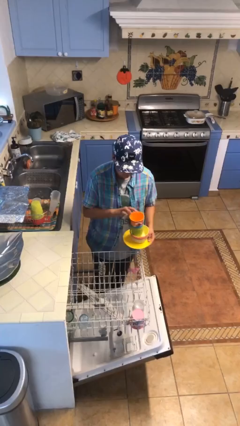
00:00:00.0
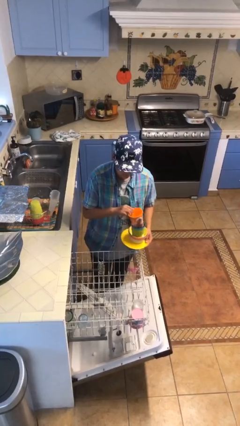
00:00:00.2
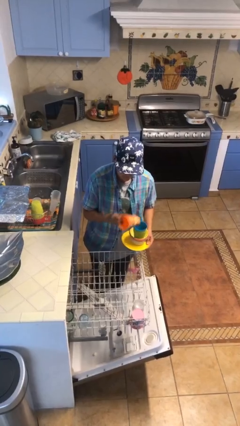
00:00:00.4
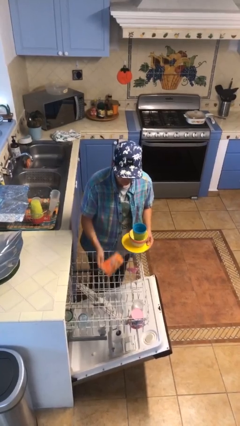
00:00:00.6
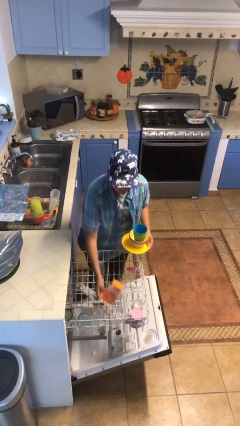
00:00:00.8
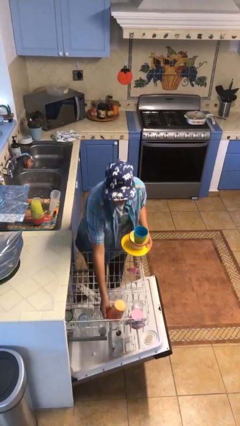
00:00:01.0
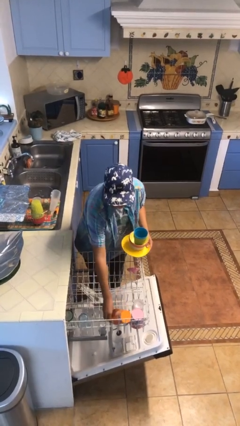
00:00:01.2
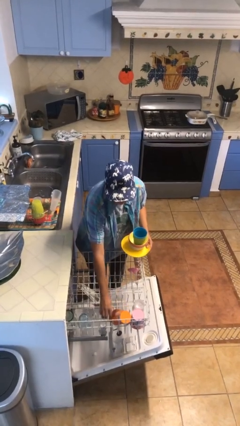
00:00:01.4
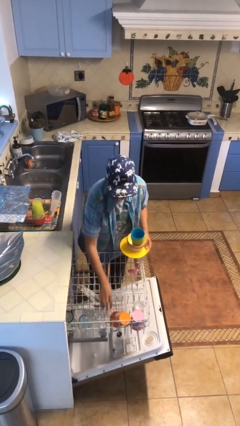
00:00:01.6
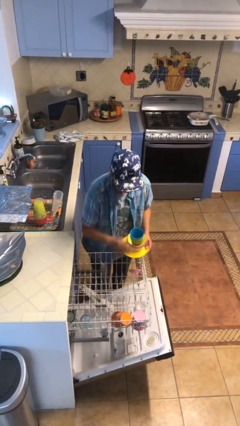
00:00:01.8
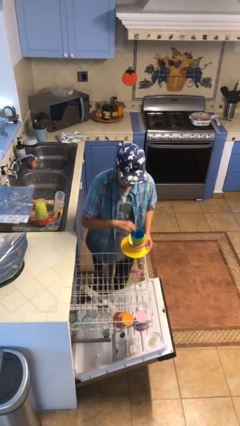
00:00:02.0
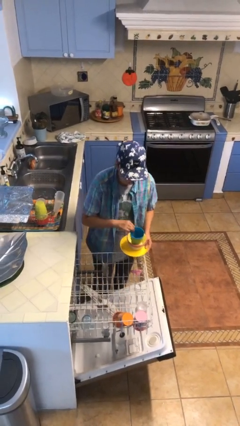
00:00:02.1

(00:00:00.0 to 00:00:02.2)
person loads dishwasher

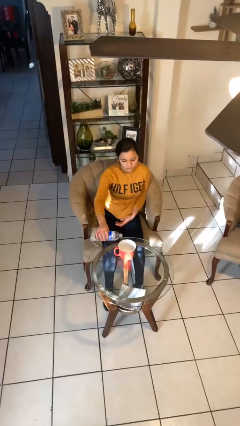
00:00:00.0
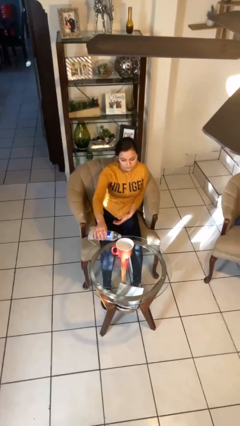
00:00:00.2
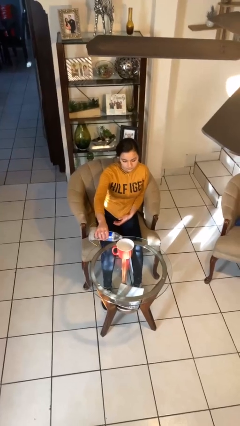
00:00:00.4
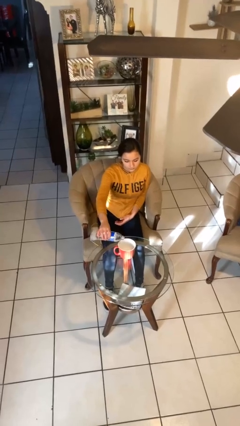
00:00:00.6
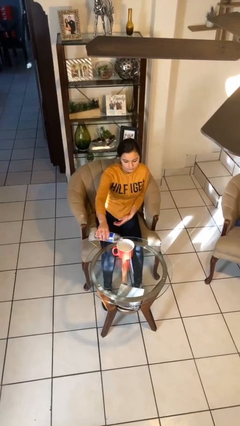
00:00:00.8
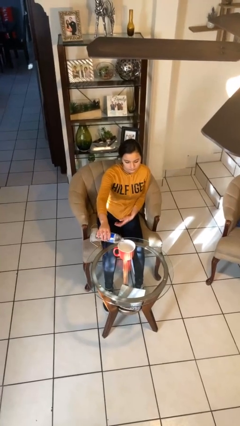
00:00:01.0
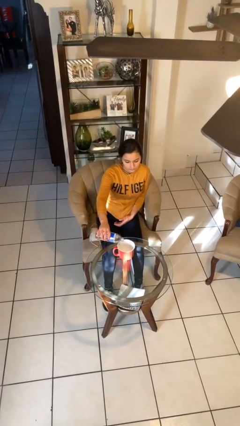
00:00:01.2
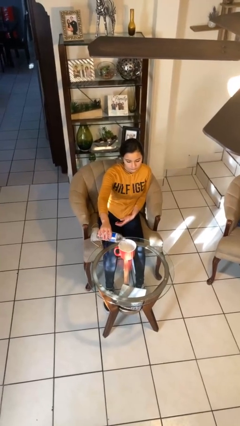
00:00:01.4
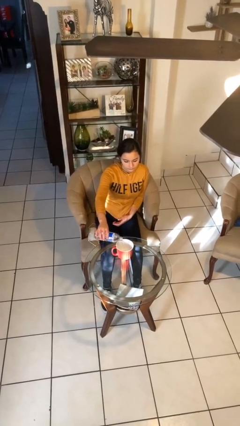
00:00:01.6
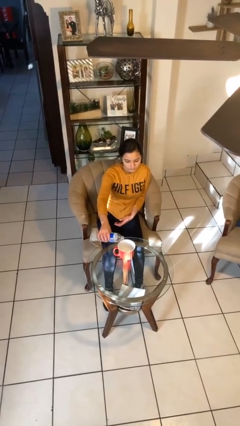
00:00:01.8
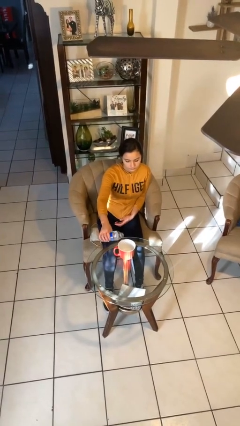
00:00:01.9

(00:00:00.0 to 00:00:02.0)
person pours liquid into cup

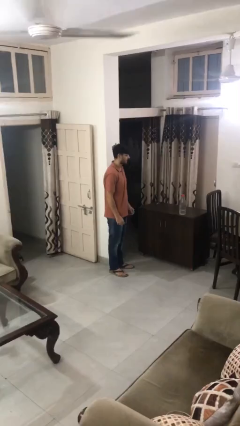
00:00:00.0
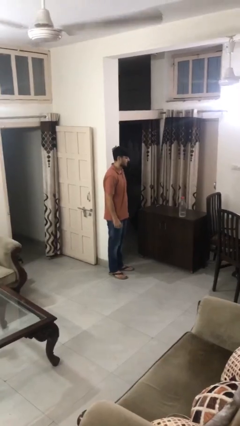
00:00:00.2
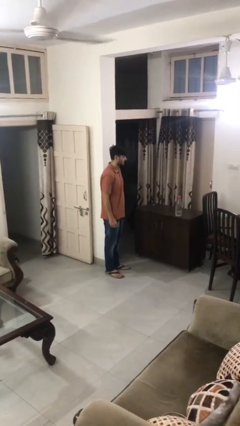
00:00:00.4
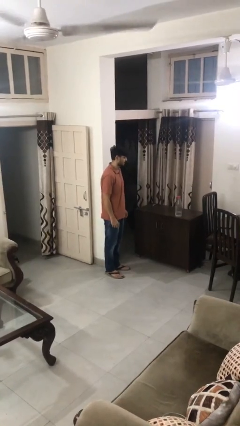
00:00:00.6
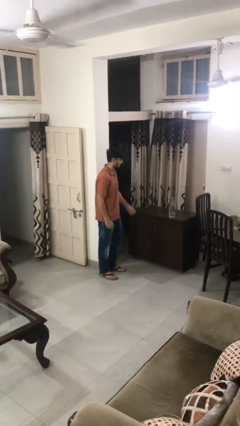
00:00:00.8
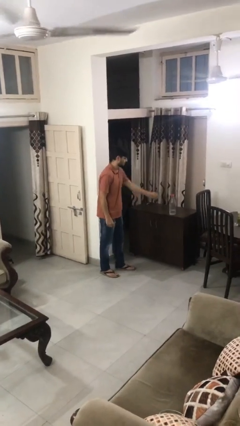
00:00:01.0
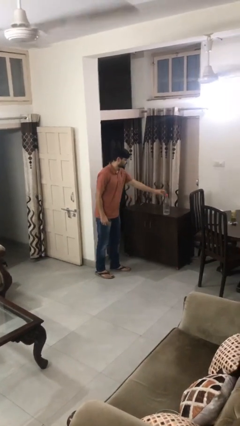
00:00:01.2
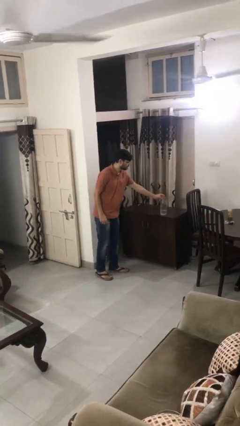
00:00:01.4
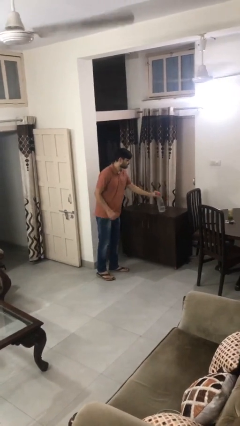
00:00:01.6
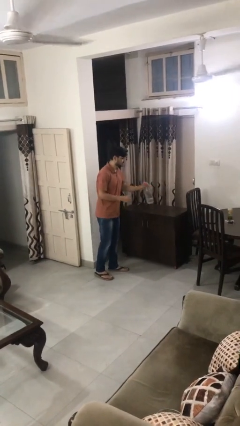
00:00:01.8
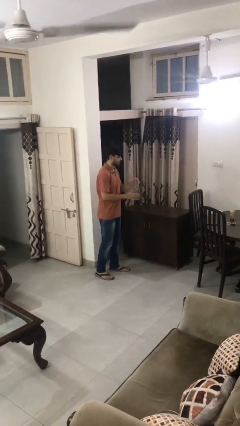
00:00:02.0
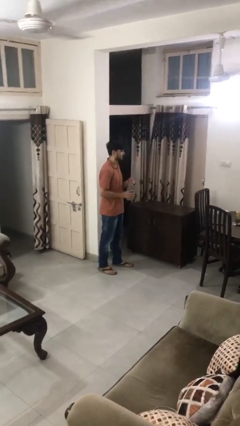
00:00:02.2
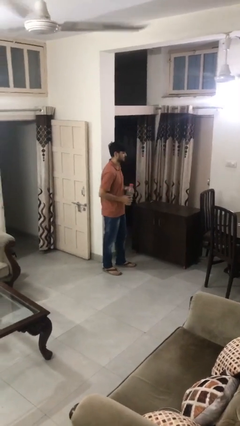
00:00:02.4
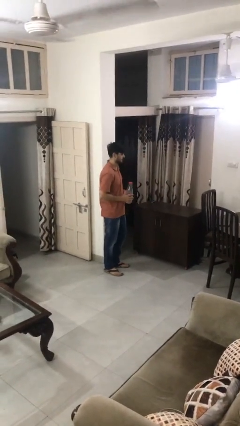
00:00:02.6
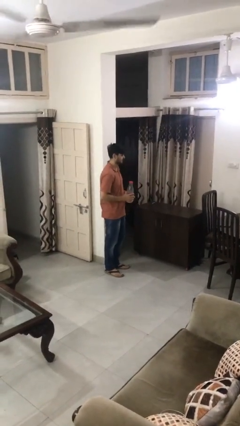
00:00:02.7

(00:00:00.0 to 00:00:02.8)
person picks up object from countertop

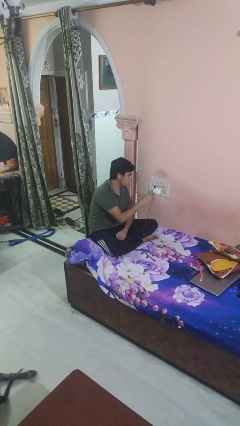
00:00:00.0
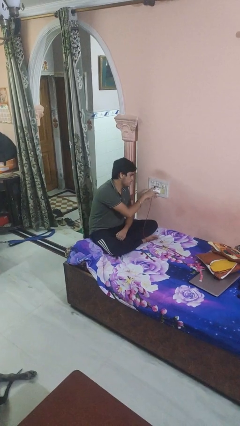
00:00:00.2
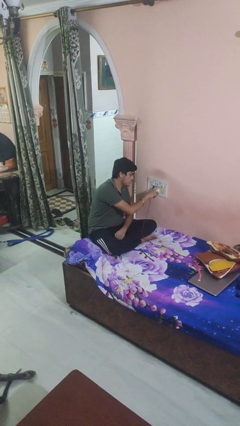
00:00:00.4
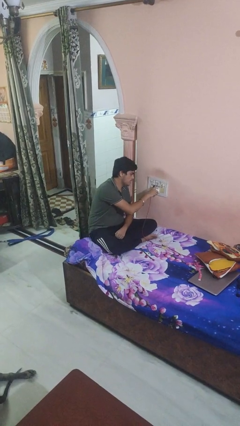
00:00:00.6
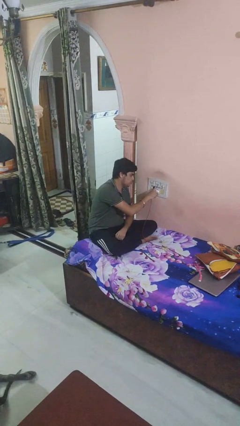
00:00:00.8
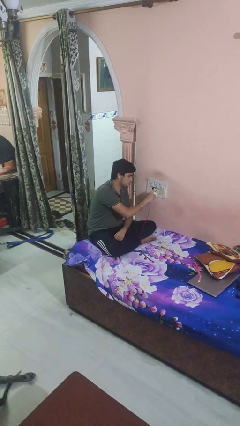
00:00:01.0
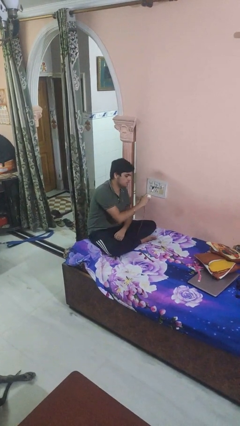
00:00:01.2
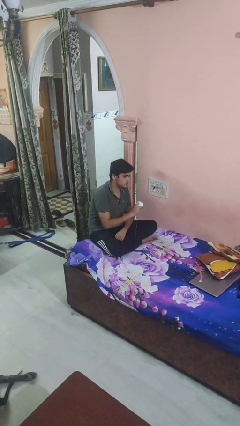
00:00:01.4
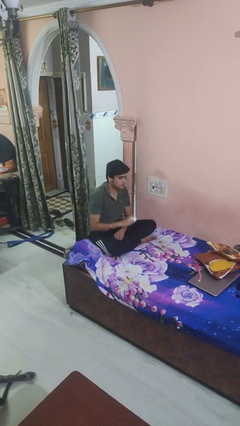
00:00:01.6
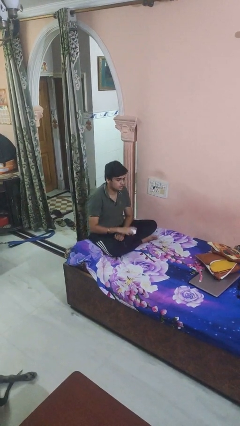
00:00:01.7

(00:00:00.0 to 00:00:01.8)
person unplugs from electrical socket

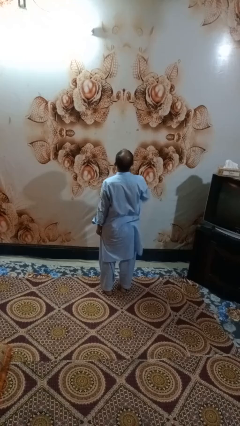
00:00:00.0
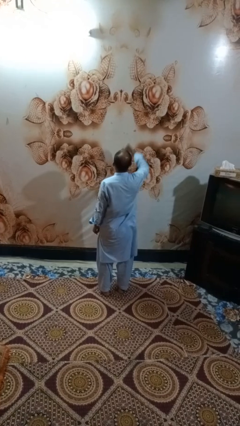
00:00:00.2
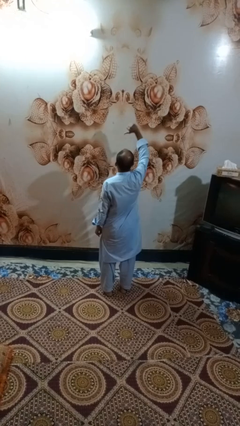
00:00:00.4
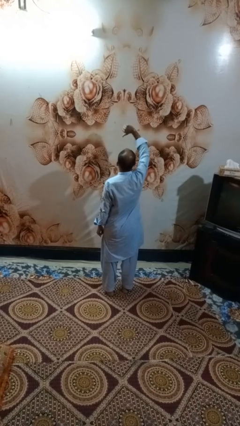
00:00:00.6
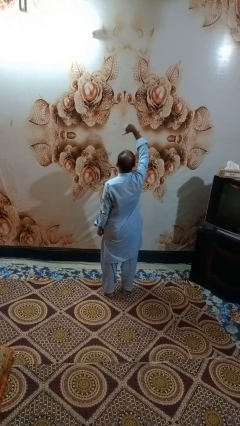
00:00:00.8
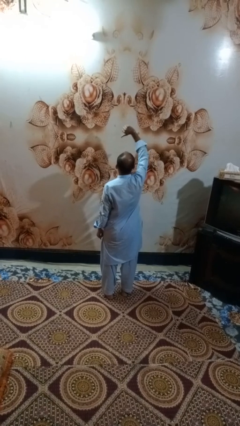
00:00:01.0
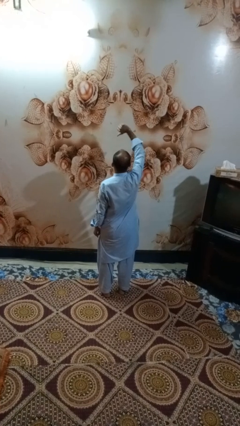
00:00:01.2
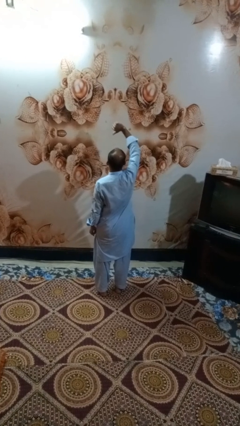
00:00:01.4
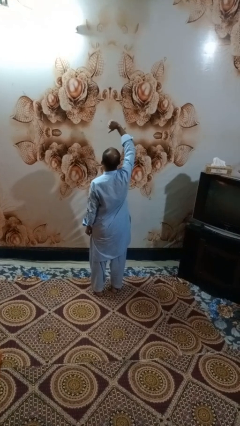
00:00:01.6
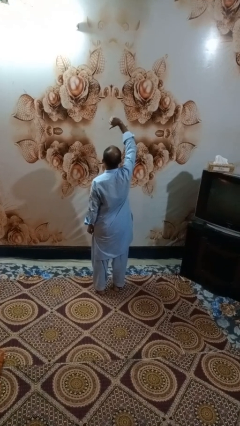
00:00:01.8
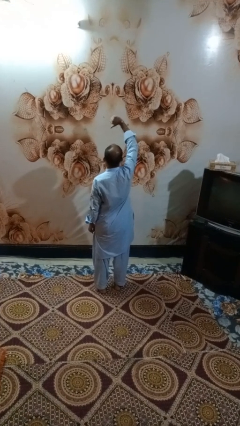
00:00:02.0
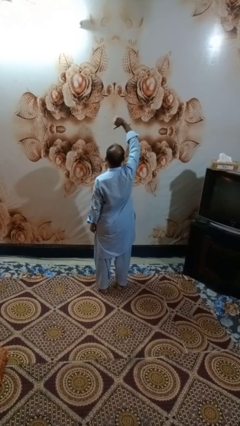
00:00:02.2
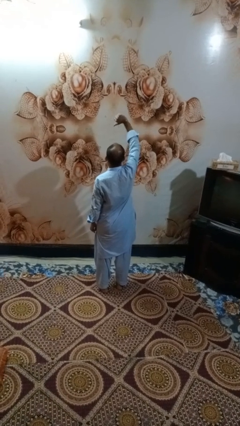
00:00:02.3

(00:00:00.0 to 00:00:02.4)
person gestures thumbs down

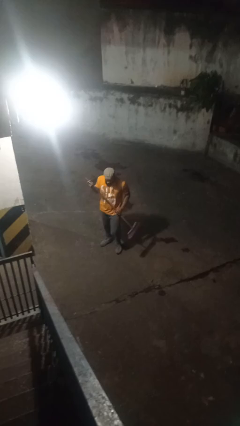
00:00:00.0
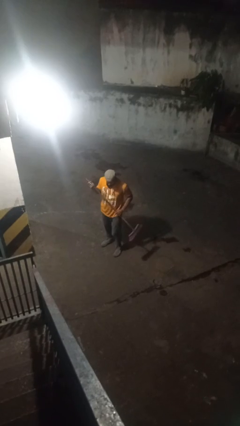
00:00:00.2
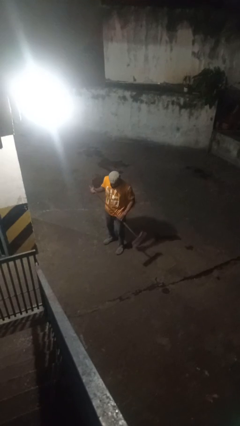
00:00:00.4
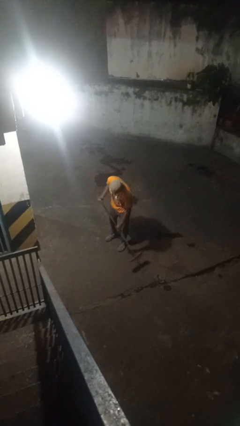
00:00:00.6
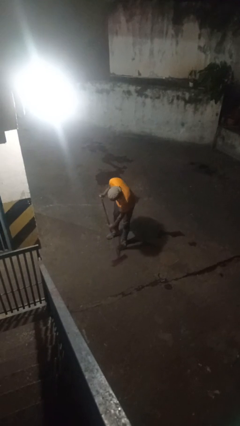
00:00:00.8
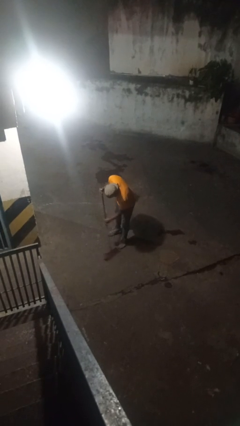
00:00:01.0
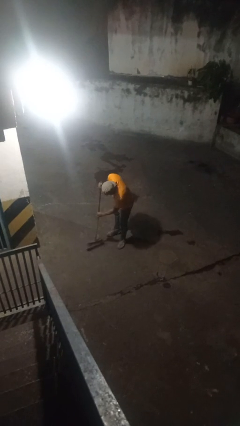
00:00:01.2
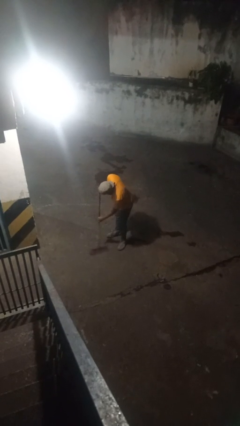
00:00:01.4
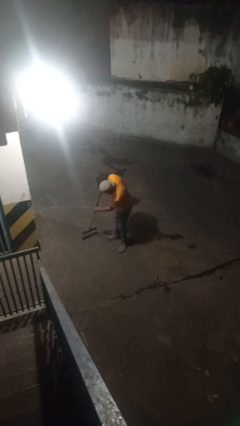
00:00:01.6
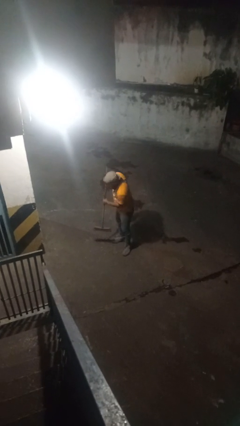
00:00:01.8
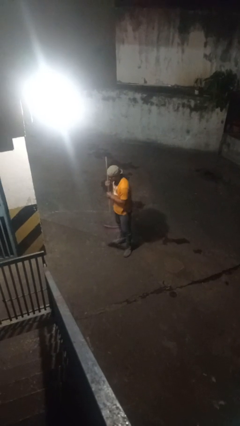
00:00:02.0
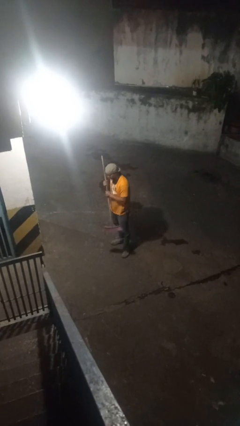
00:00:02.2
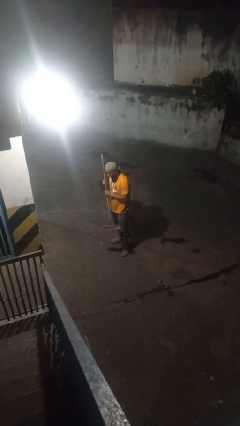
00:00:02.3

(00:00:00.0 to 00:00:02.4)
person sweeps floor

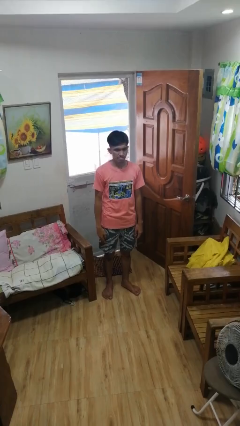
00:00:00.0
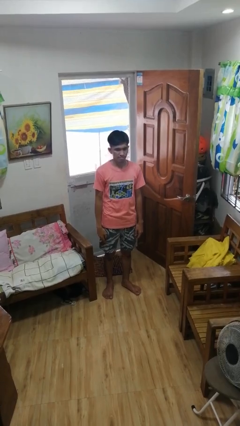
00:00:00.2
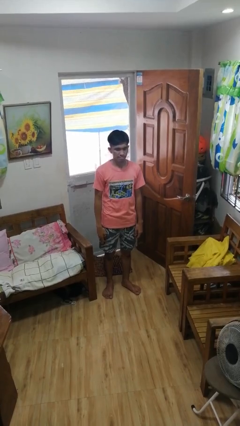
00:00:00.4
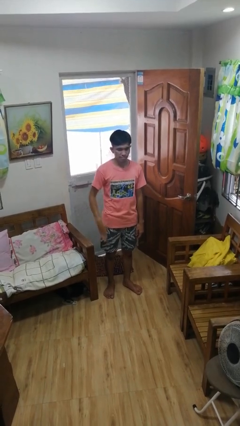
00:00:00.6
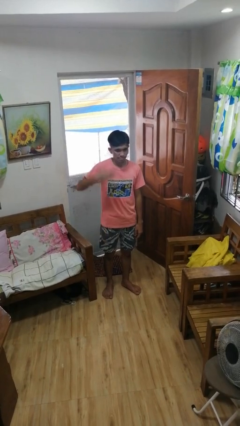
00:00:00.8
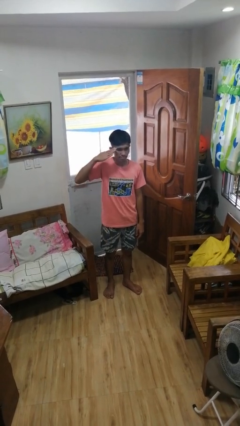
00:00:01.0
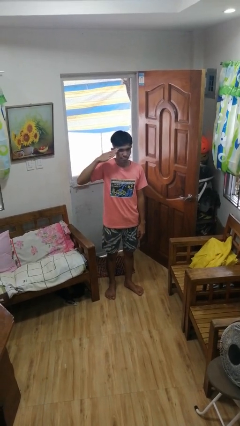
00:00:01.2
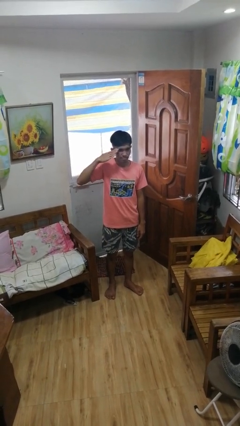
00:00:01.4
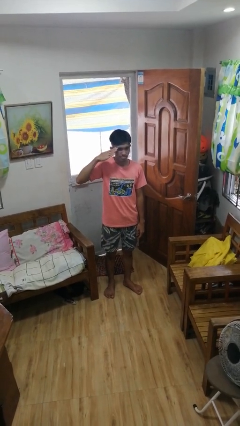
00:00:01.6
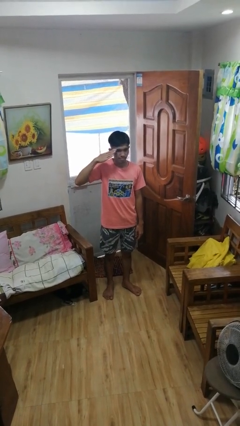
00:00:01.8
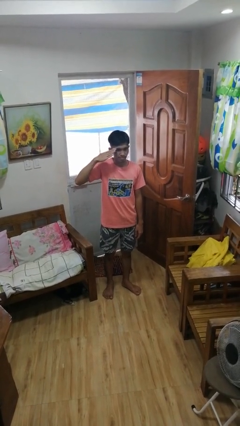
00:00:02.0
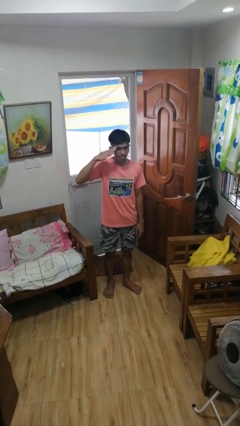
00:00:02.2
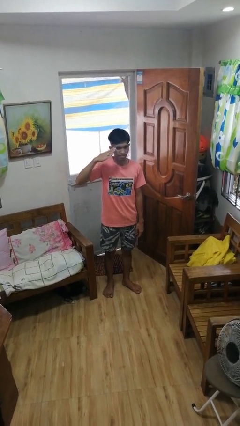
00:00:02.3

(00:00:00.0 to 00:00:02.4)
person salutes

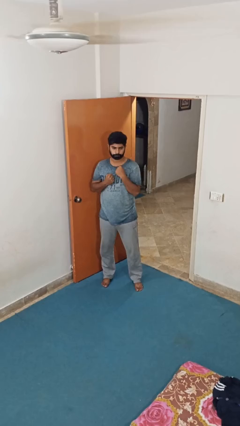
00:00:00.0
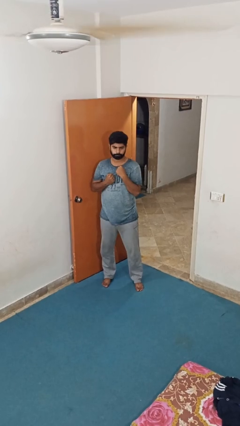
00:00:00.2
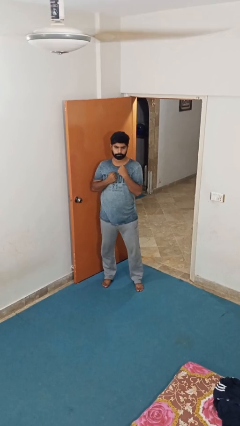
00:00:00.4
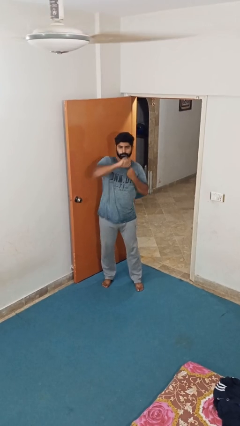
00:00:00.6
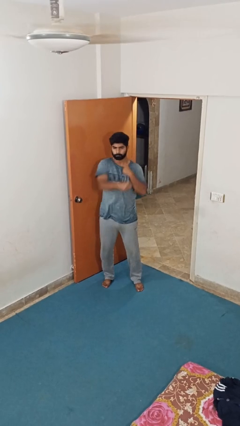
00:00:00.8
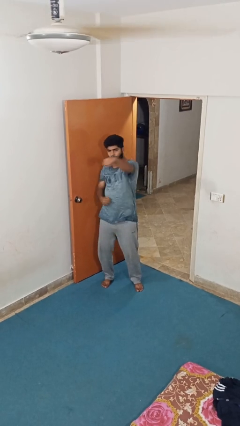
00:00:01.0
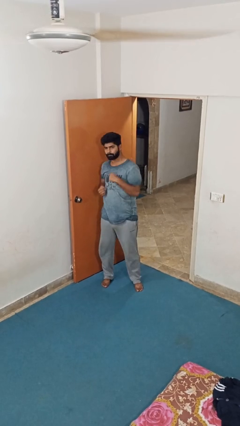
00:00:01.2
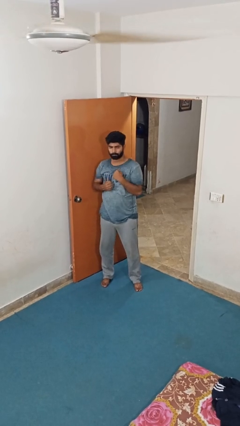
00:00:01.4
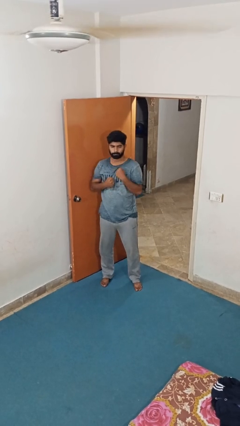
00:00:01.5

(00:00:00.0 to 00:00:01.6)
person punches
